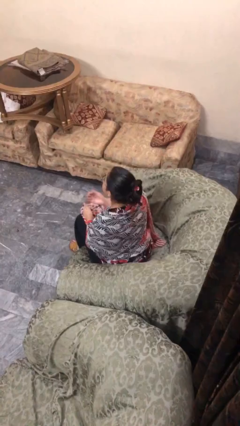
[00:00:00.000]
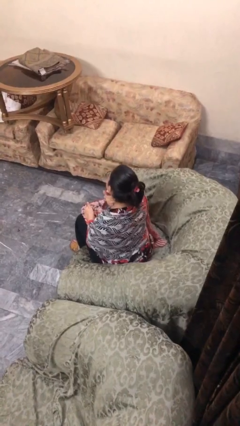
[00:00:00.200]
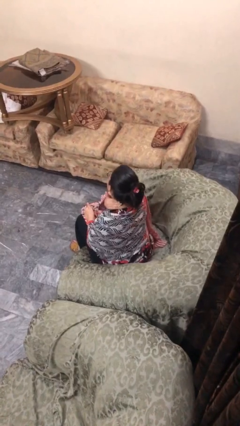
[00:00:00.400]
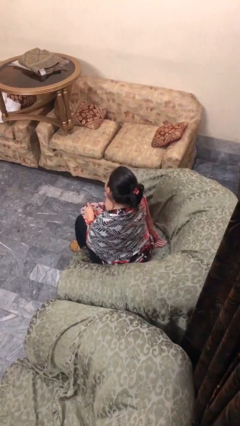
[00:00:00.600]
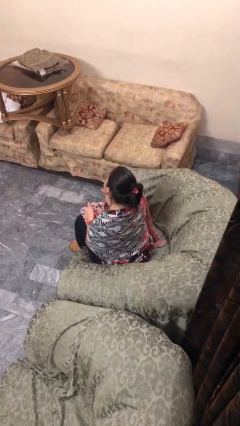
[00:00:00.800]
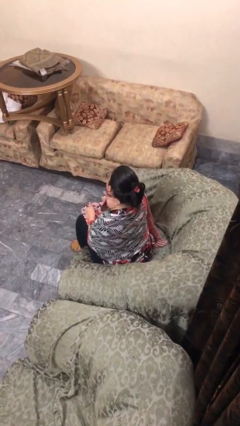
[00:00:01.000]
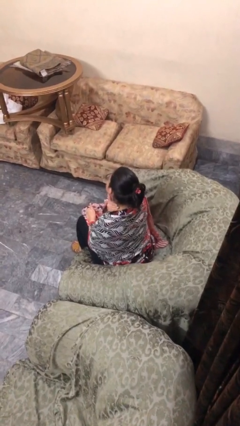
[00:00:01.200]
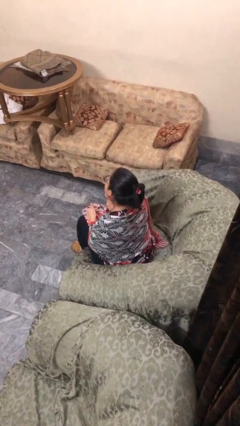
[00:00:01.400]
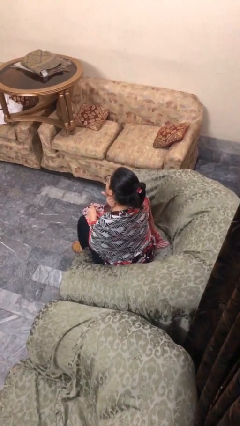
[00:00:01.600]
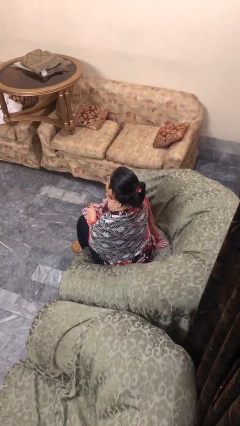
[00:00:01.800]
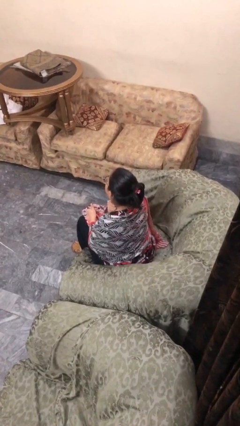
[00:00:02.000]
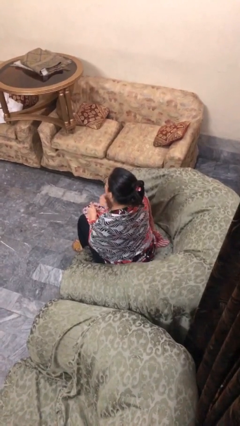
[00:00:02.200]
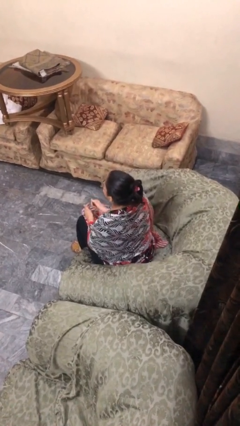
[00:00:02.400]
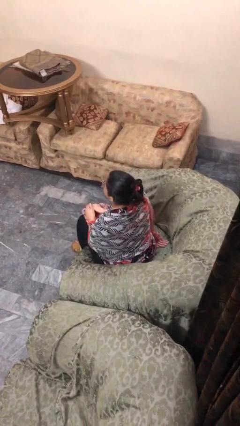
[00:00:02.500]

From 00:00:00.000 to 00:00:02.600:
person rubs neck

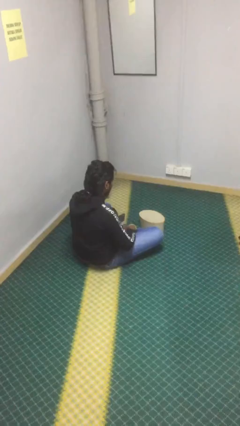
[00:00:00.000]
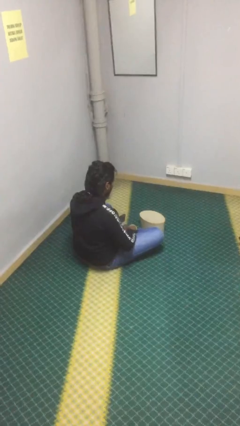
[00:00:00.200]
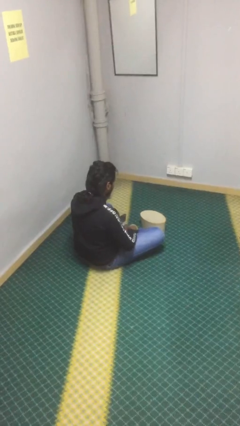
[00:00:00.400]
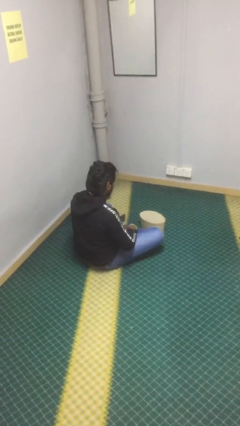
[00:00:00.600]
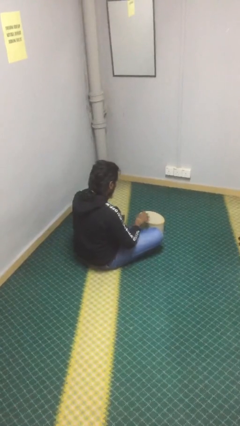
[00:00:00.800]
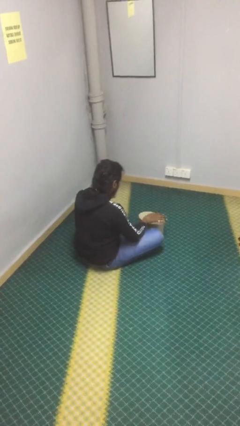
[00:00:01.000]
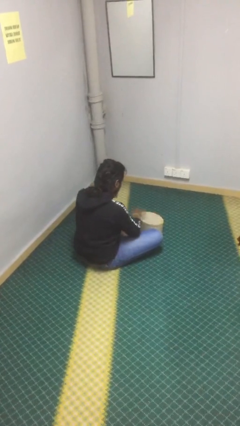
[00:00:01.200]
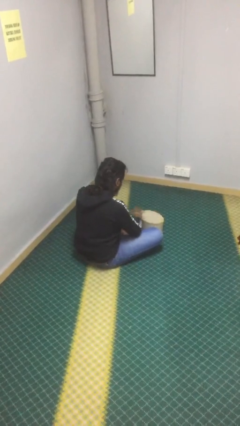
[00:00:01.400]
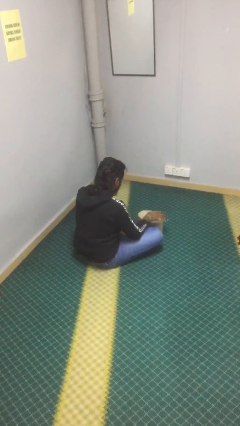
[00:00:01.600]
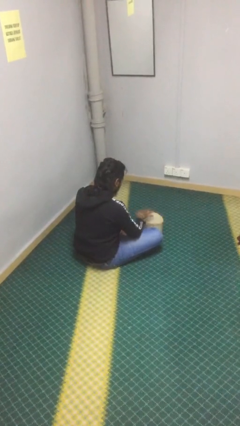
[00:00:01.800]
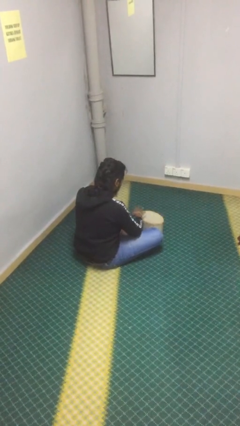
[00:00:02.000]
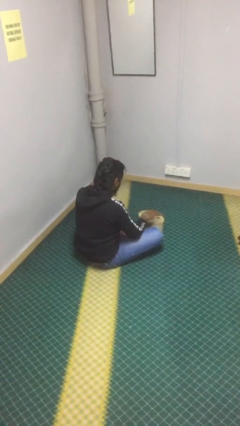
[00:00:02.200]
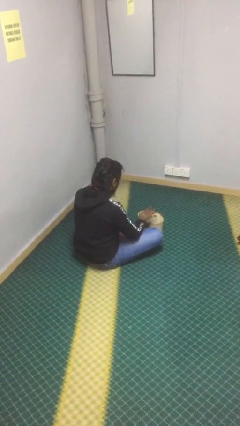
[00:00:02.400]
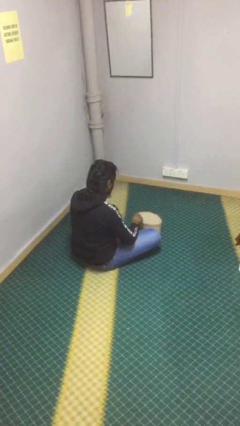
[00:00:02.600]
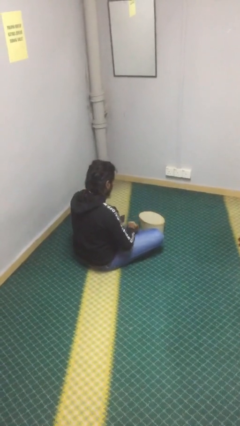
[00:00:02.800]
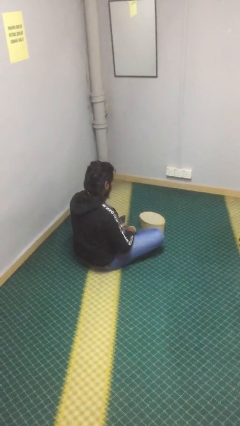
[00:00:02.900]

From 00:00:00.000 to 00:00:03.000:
person waves hand over object

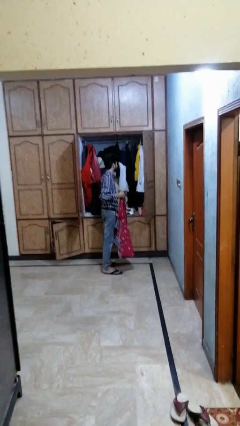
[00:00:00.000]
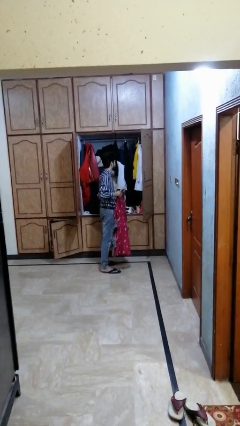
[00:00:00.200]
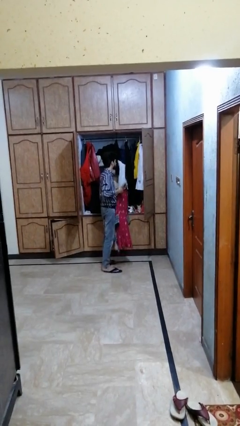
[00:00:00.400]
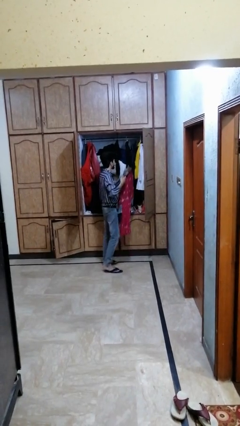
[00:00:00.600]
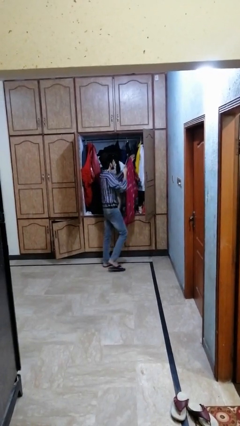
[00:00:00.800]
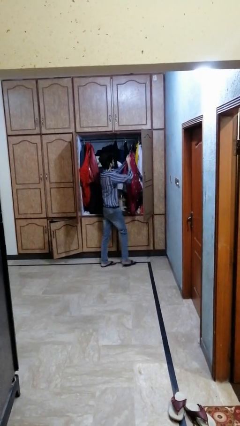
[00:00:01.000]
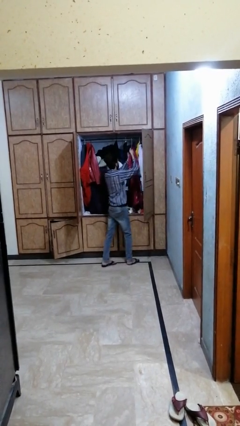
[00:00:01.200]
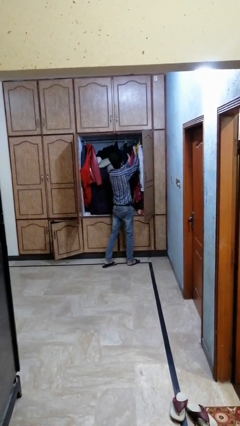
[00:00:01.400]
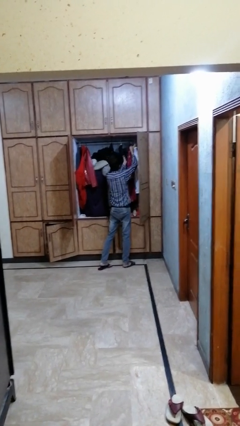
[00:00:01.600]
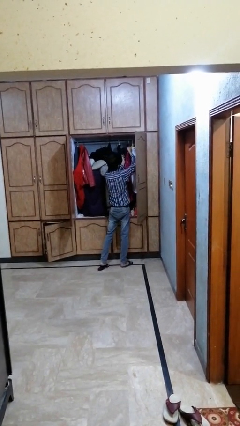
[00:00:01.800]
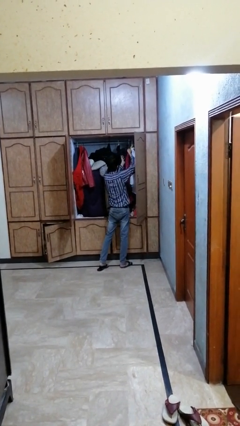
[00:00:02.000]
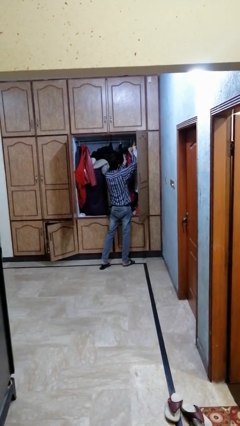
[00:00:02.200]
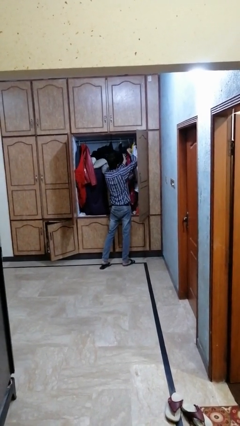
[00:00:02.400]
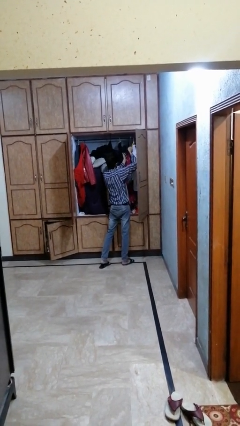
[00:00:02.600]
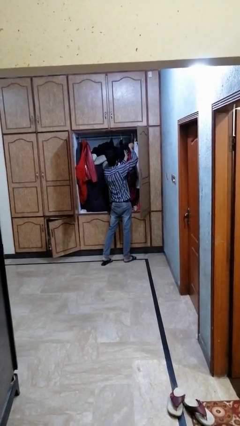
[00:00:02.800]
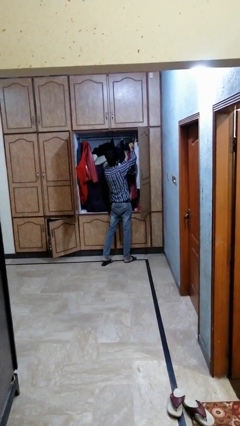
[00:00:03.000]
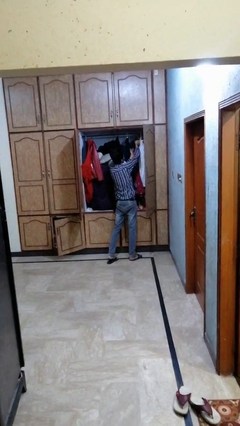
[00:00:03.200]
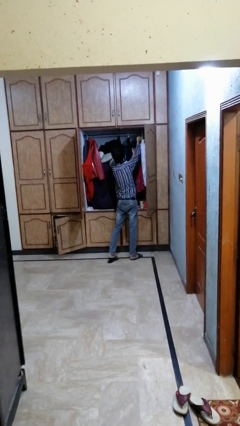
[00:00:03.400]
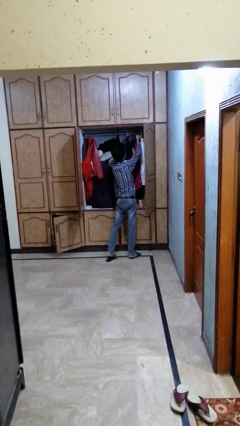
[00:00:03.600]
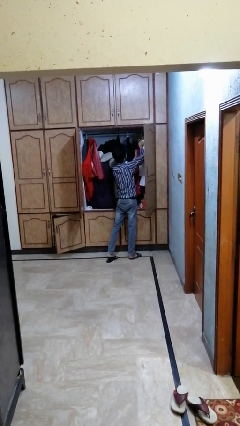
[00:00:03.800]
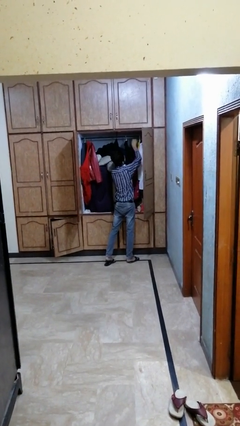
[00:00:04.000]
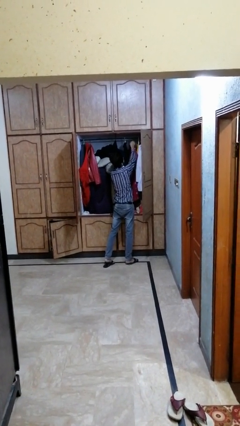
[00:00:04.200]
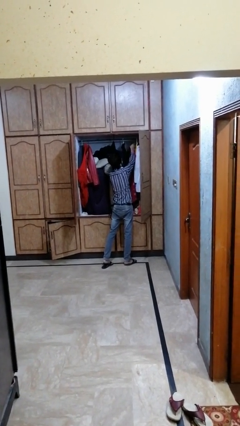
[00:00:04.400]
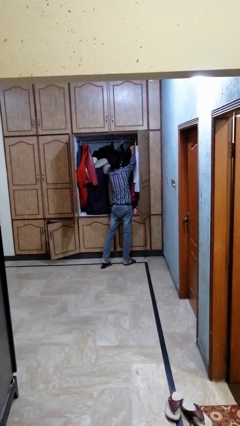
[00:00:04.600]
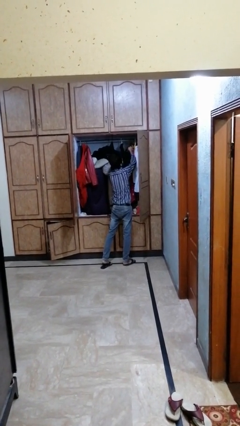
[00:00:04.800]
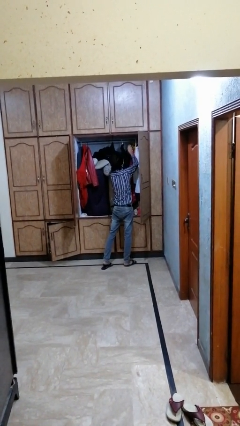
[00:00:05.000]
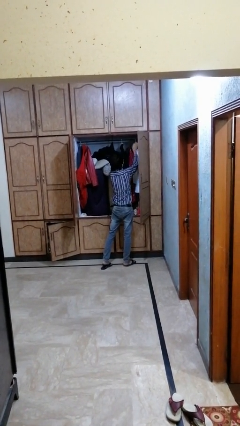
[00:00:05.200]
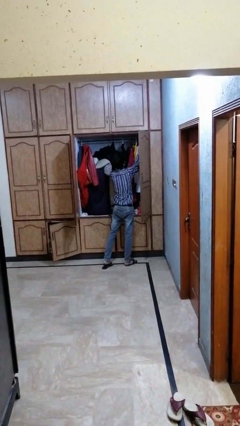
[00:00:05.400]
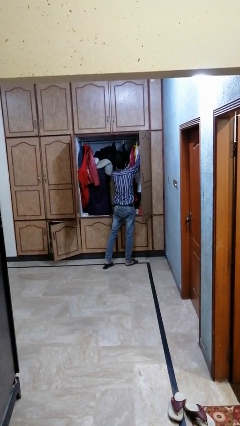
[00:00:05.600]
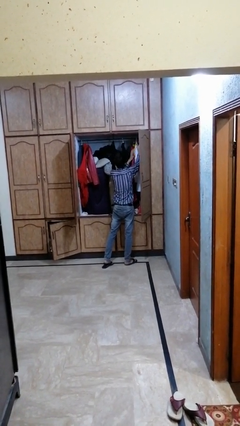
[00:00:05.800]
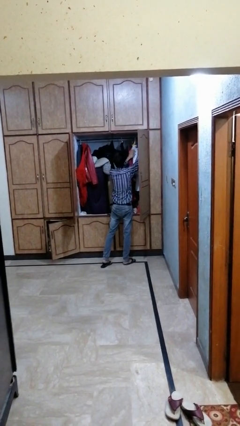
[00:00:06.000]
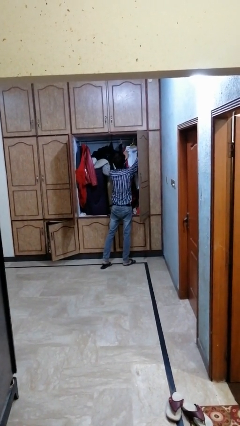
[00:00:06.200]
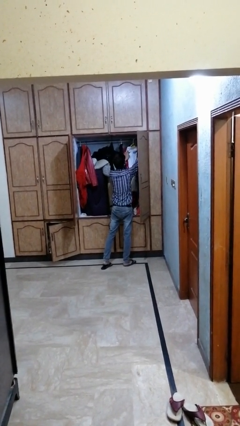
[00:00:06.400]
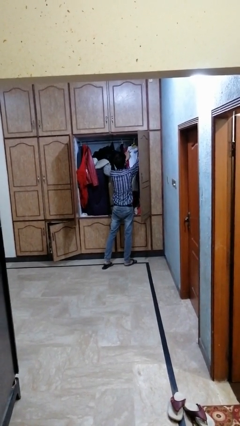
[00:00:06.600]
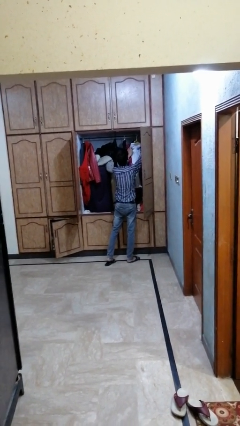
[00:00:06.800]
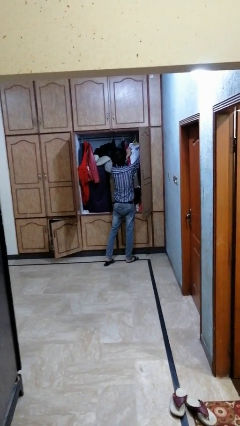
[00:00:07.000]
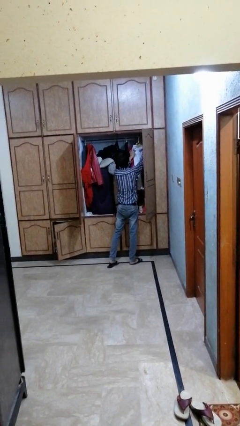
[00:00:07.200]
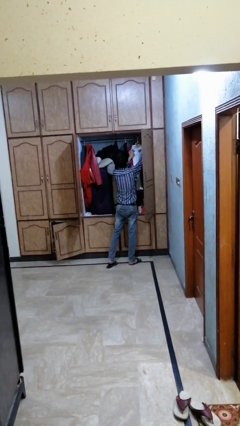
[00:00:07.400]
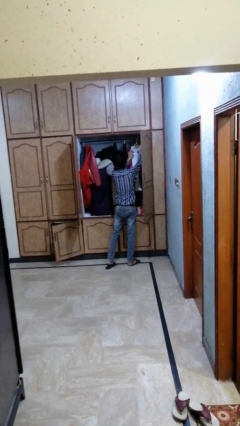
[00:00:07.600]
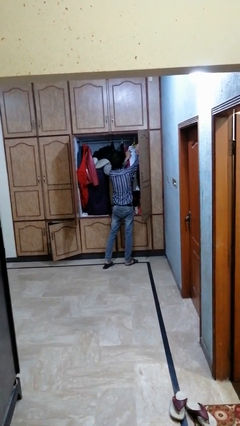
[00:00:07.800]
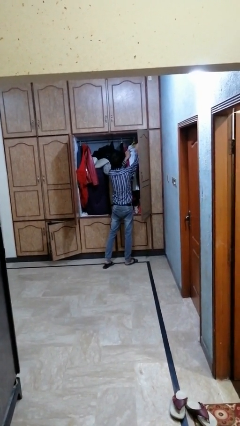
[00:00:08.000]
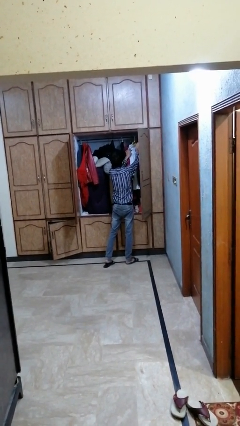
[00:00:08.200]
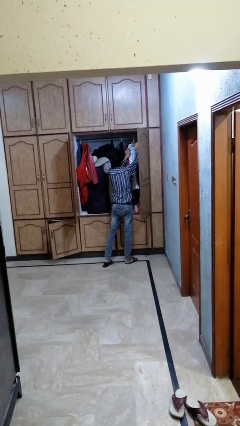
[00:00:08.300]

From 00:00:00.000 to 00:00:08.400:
person puts clothes into dresser

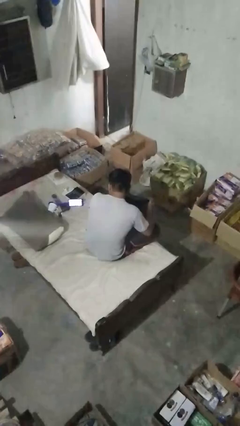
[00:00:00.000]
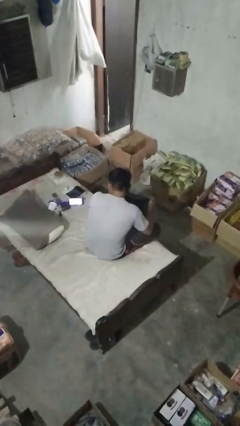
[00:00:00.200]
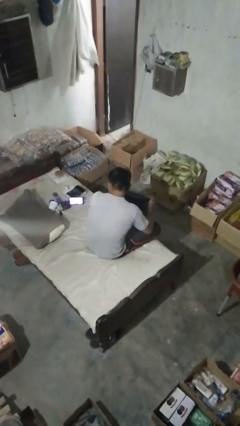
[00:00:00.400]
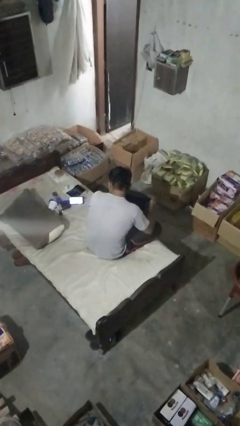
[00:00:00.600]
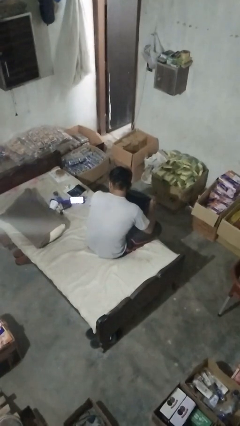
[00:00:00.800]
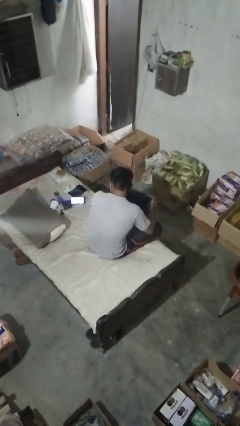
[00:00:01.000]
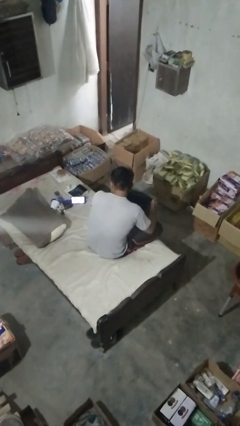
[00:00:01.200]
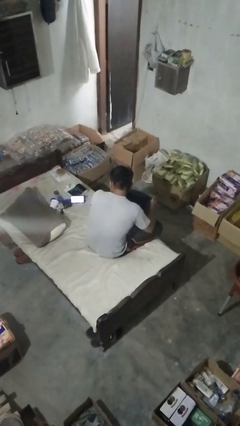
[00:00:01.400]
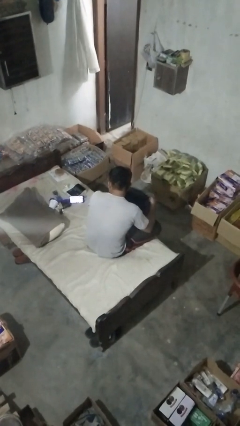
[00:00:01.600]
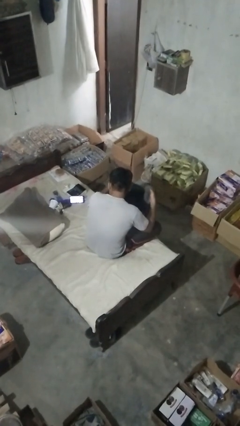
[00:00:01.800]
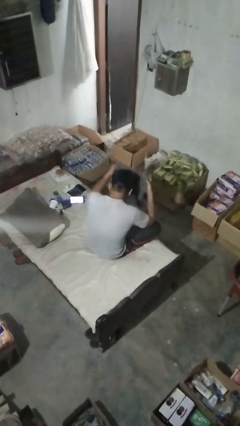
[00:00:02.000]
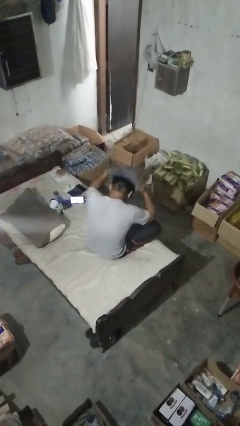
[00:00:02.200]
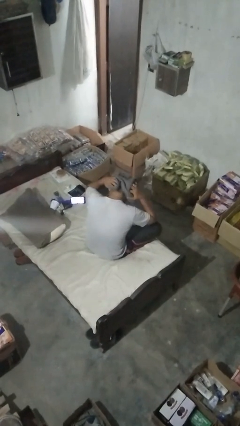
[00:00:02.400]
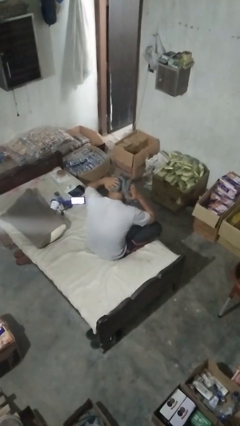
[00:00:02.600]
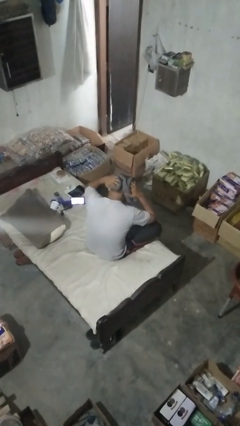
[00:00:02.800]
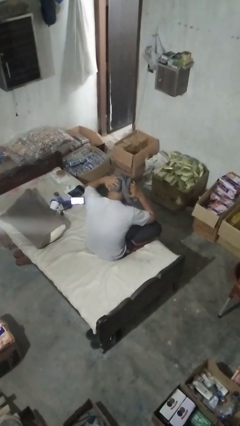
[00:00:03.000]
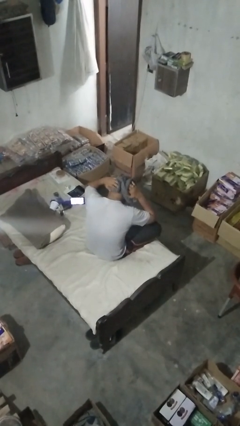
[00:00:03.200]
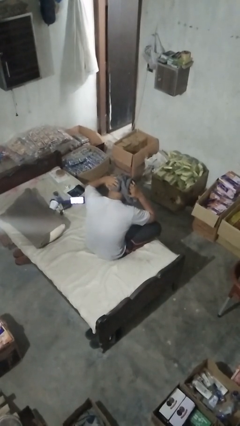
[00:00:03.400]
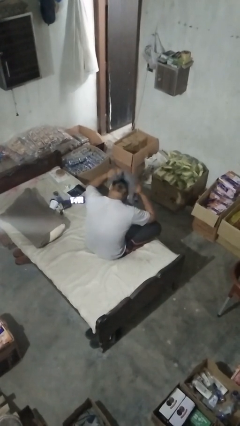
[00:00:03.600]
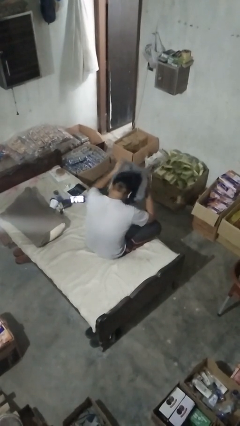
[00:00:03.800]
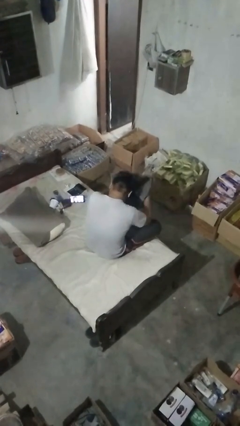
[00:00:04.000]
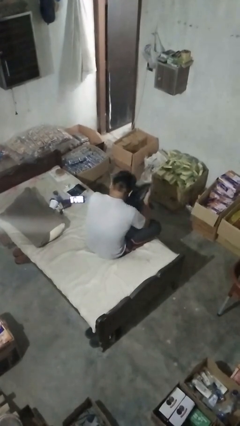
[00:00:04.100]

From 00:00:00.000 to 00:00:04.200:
person dries hair with towel
